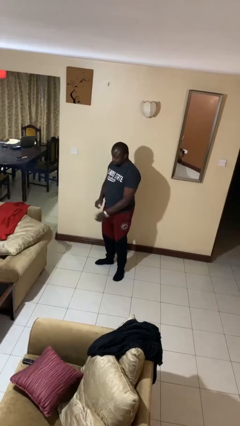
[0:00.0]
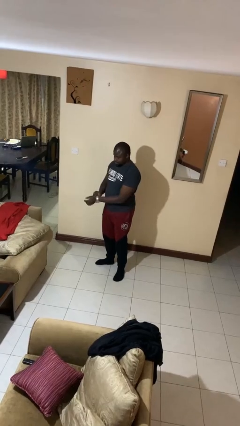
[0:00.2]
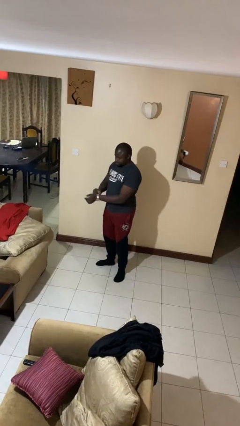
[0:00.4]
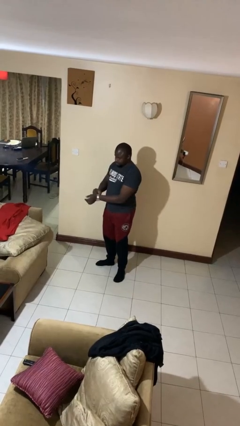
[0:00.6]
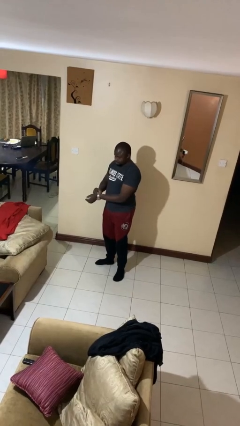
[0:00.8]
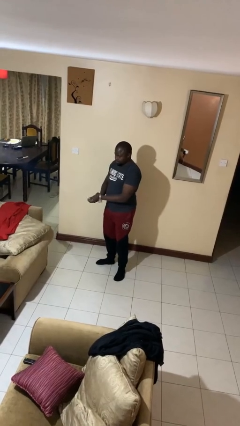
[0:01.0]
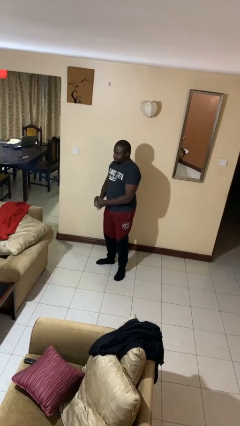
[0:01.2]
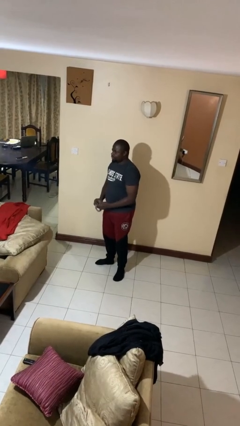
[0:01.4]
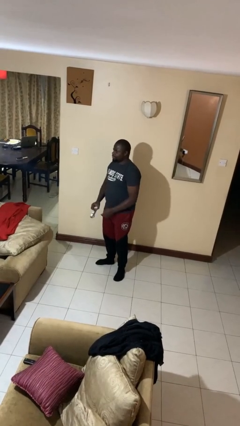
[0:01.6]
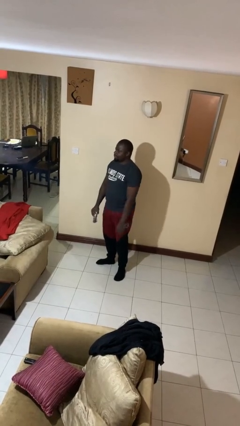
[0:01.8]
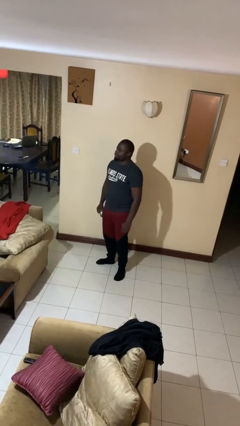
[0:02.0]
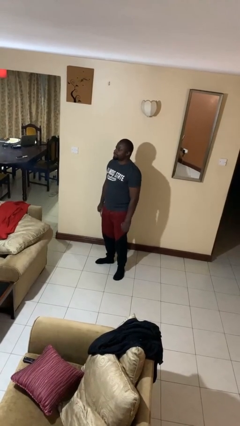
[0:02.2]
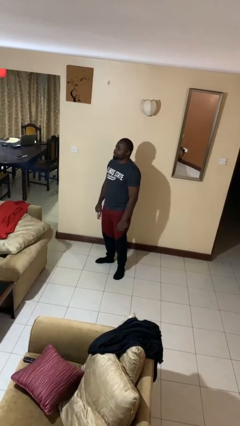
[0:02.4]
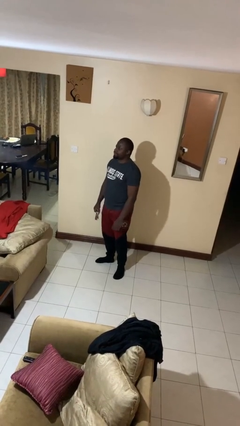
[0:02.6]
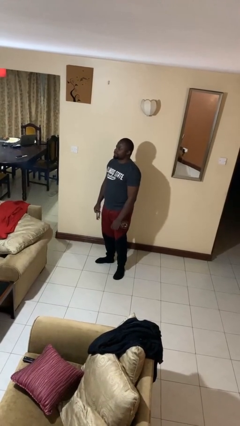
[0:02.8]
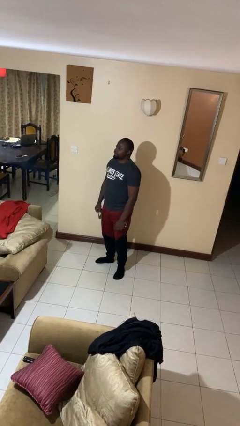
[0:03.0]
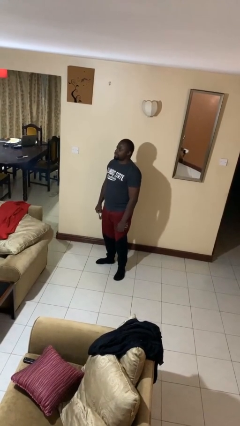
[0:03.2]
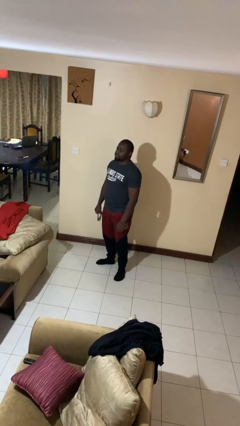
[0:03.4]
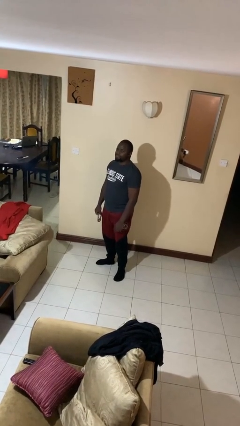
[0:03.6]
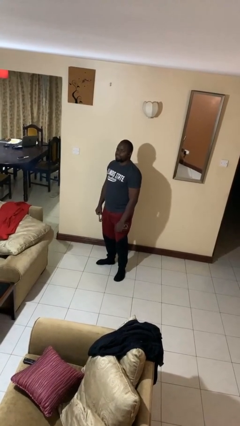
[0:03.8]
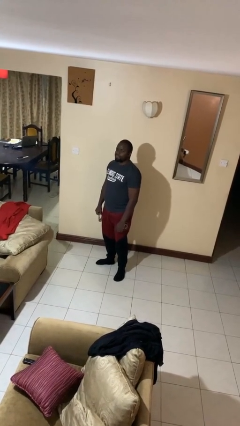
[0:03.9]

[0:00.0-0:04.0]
person takes off wristwatch

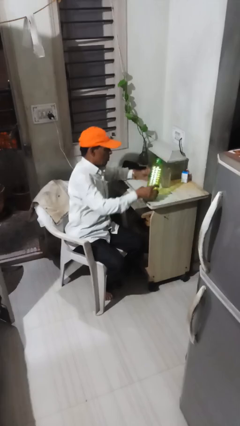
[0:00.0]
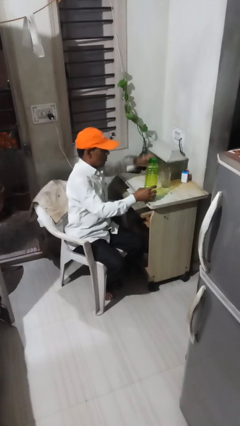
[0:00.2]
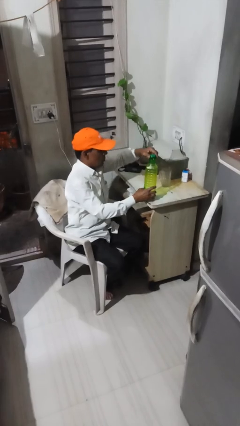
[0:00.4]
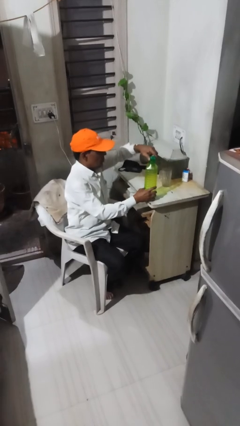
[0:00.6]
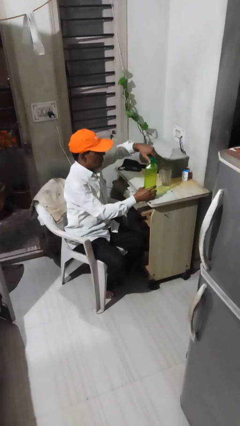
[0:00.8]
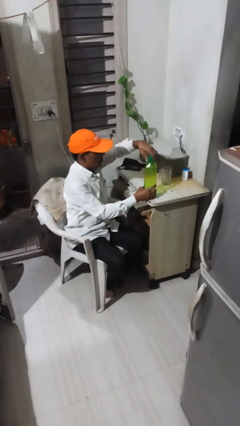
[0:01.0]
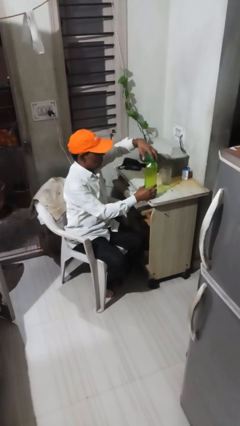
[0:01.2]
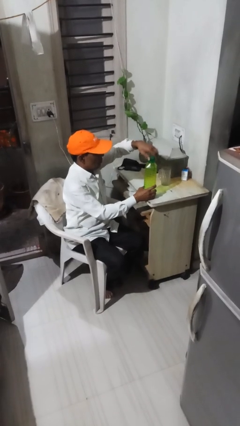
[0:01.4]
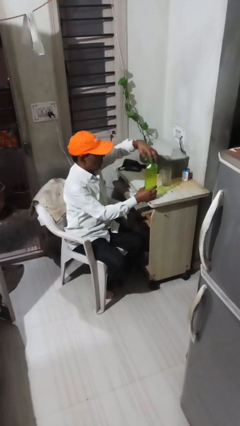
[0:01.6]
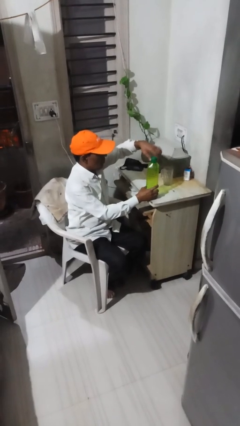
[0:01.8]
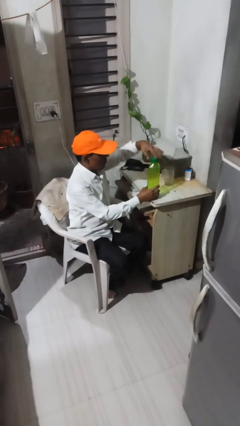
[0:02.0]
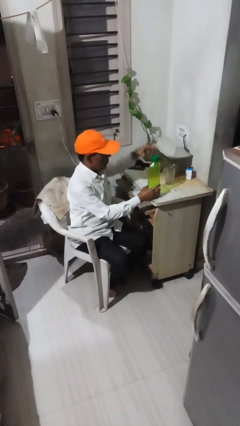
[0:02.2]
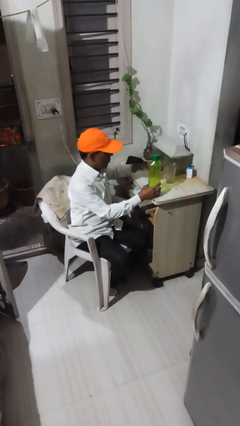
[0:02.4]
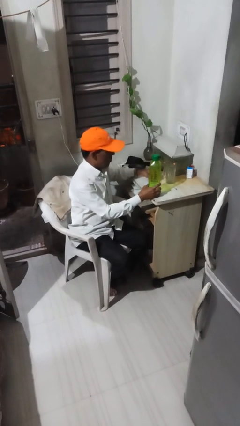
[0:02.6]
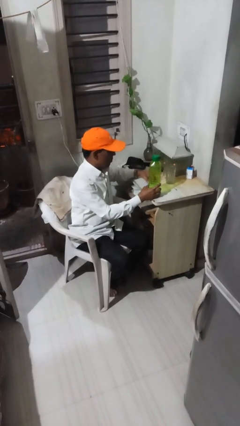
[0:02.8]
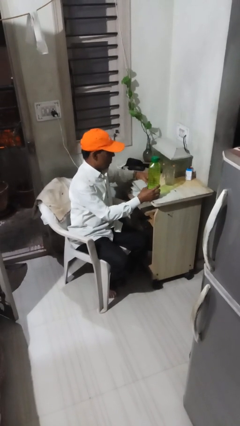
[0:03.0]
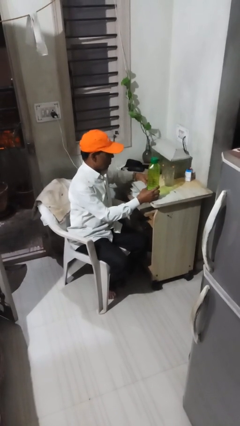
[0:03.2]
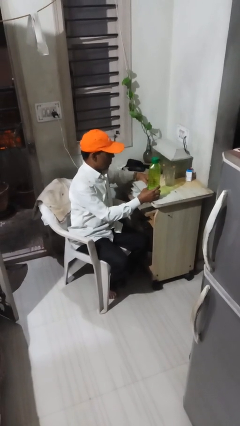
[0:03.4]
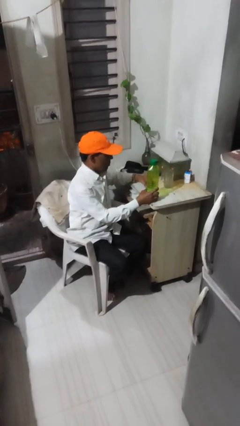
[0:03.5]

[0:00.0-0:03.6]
person screws lid to bottle

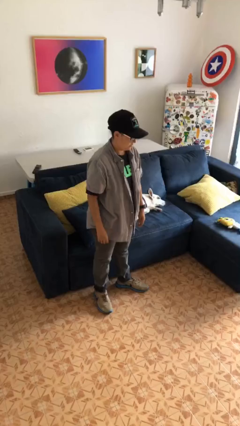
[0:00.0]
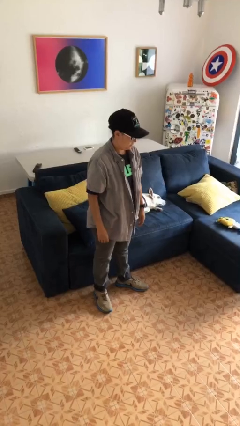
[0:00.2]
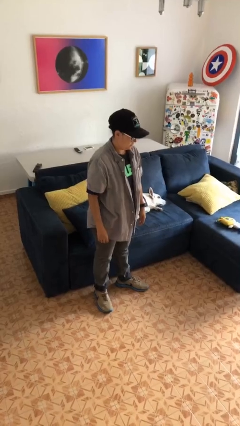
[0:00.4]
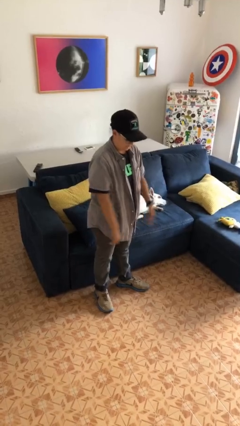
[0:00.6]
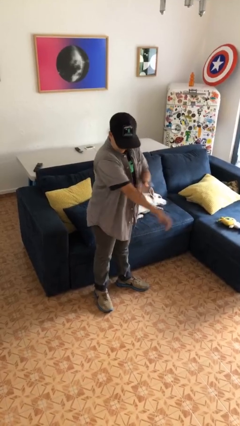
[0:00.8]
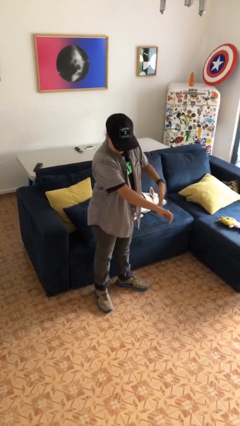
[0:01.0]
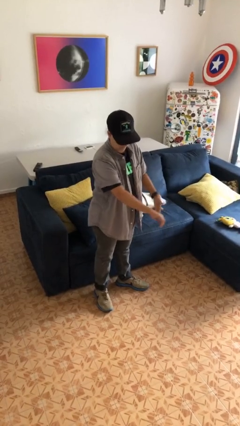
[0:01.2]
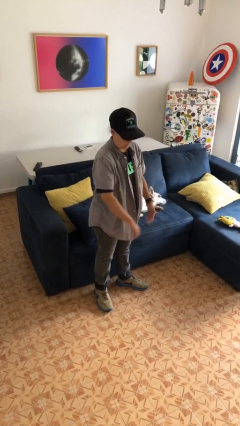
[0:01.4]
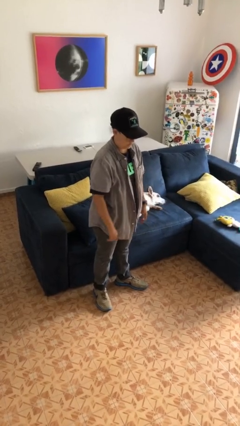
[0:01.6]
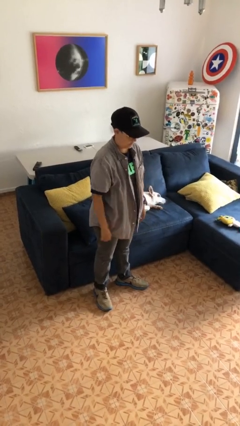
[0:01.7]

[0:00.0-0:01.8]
person swats bug

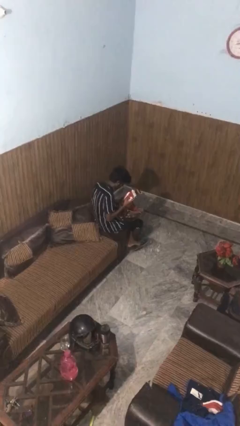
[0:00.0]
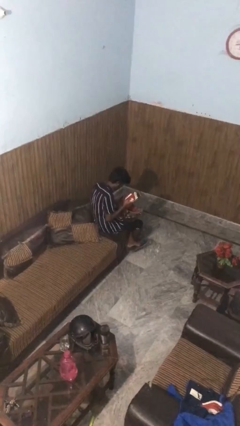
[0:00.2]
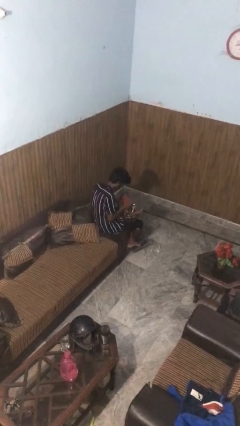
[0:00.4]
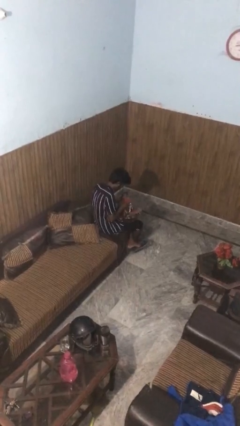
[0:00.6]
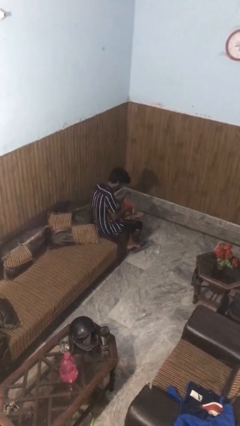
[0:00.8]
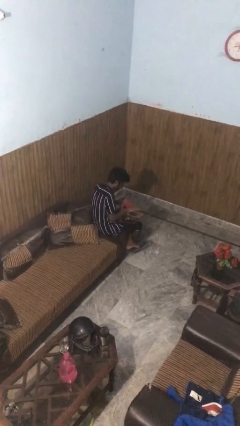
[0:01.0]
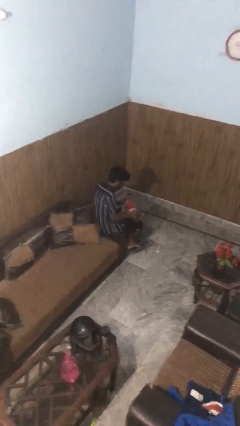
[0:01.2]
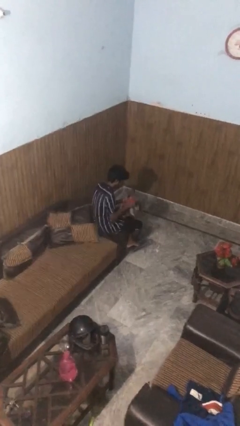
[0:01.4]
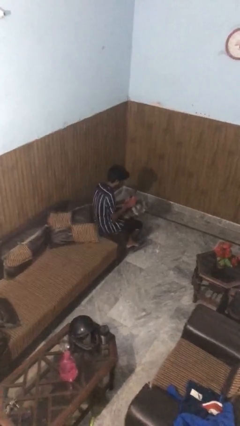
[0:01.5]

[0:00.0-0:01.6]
person puts object into purse

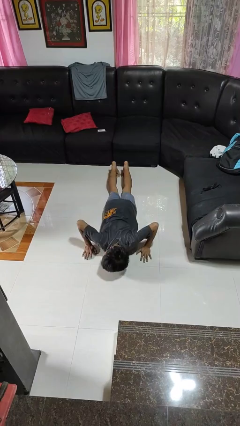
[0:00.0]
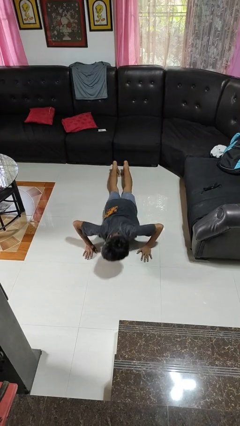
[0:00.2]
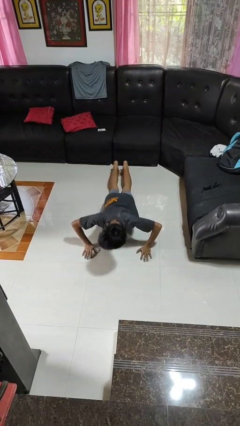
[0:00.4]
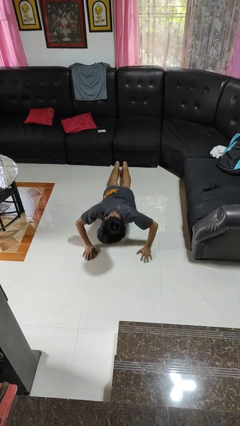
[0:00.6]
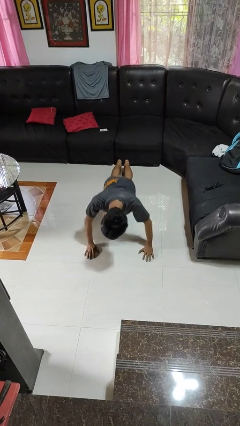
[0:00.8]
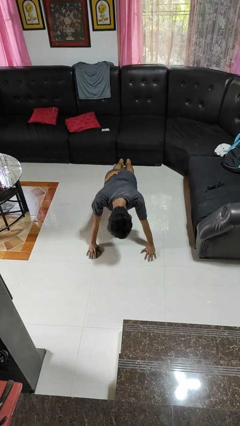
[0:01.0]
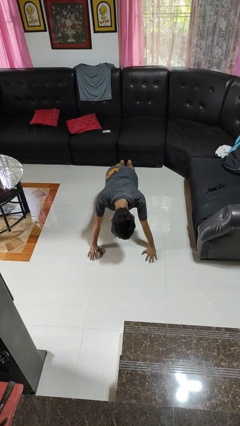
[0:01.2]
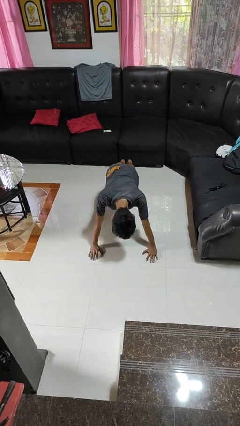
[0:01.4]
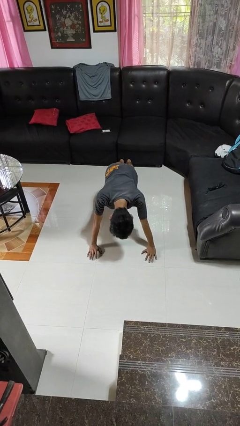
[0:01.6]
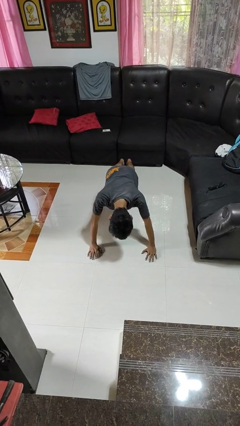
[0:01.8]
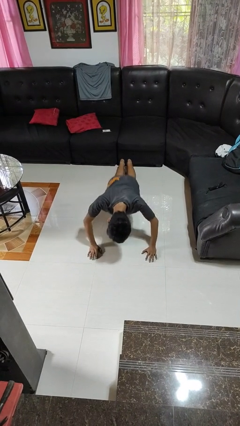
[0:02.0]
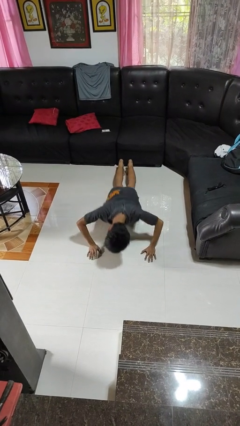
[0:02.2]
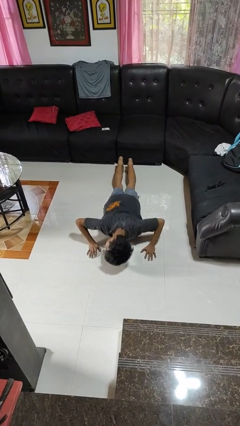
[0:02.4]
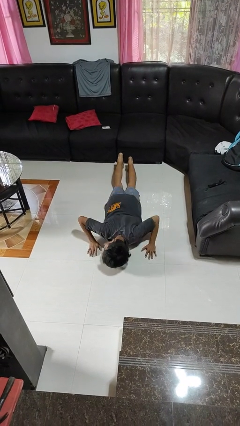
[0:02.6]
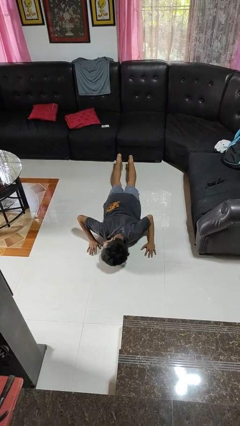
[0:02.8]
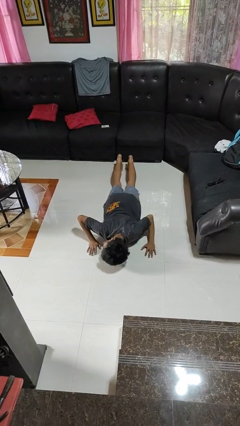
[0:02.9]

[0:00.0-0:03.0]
person exercises with pushup

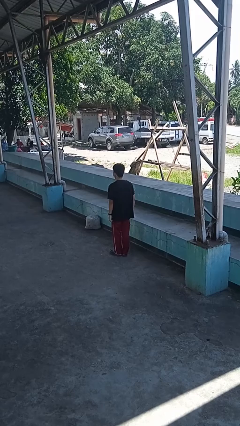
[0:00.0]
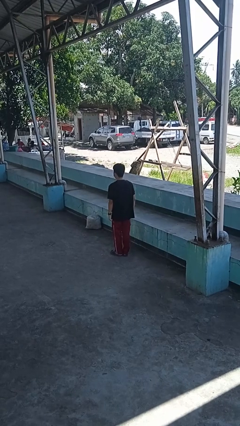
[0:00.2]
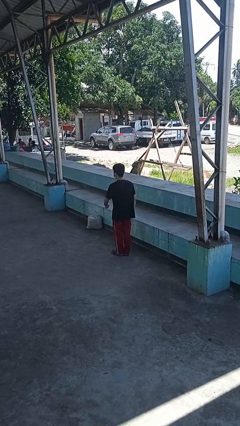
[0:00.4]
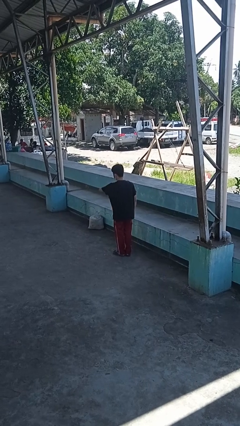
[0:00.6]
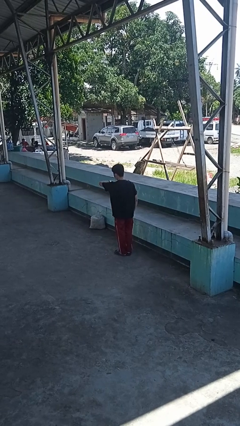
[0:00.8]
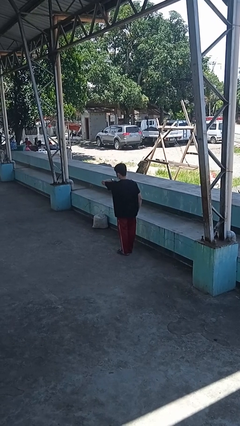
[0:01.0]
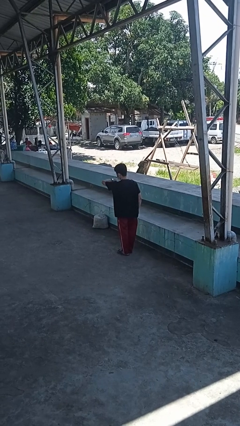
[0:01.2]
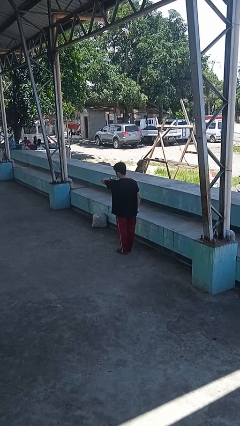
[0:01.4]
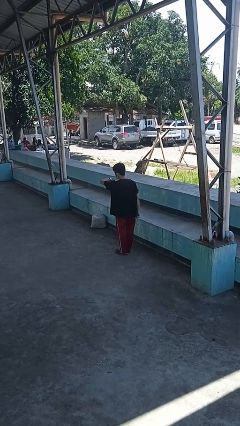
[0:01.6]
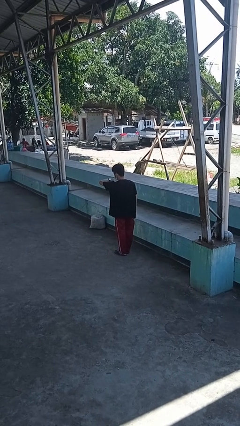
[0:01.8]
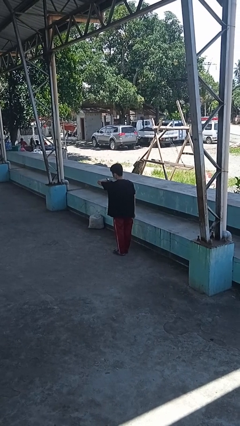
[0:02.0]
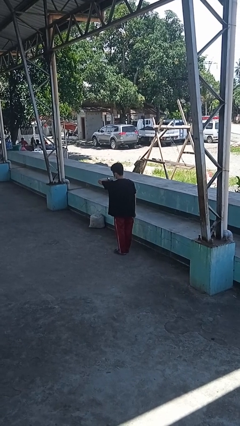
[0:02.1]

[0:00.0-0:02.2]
person looks at wristwatch

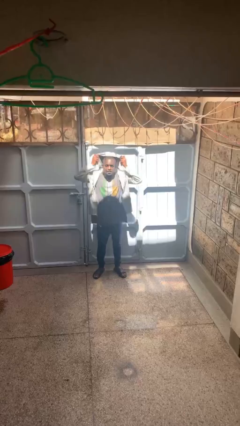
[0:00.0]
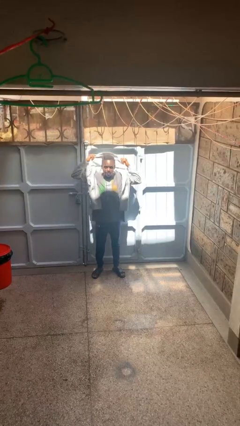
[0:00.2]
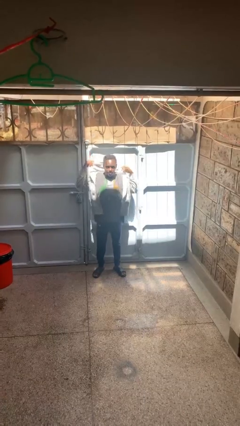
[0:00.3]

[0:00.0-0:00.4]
person takes off hoodie

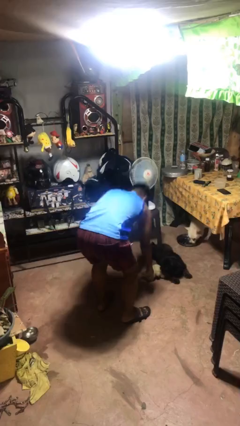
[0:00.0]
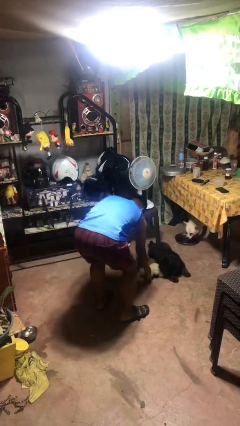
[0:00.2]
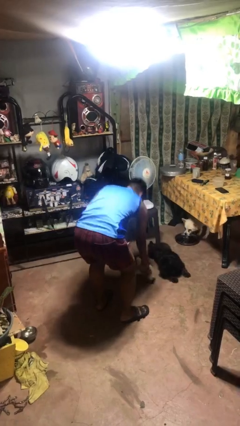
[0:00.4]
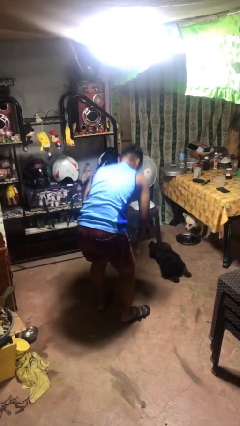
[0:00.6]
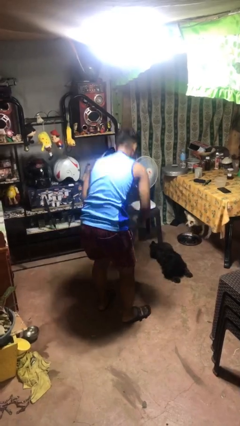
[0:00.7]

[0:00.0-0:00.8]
person picks up object from floor
